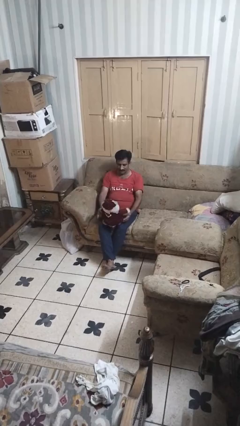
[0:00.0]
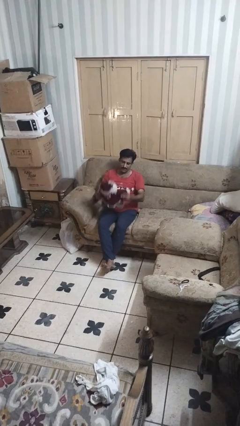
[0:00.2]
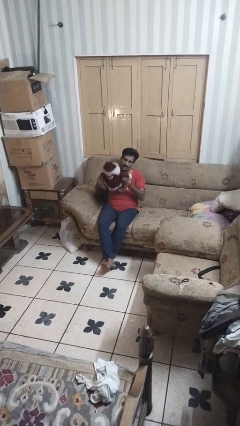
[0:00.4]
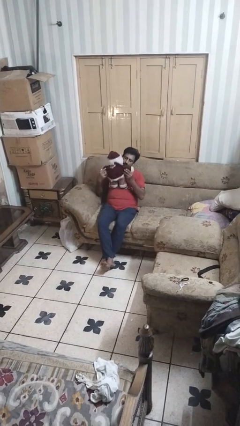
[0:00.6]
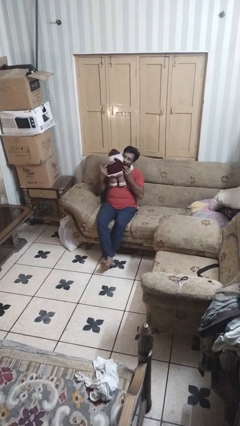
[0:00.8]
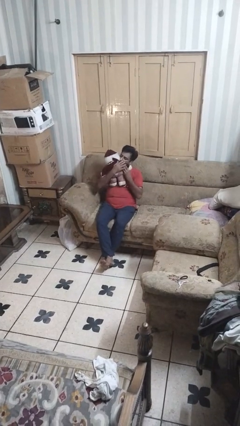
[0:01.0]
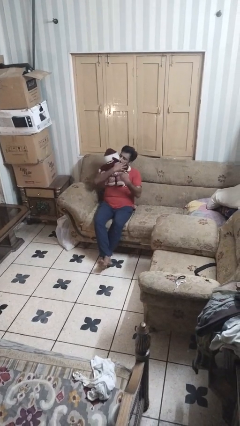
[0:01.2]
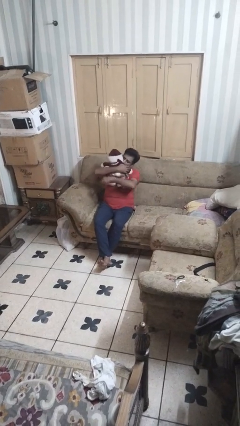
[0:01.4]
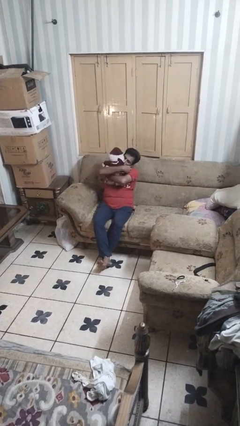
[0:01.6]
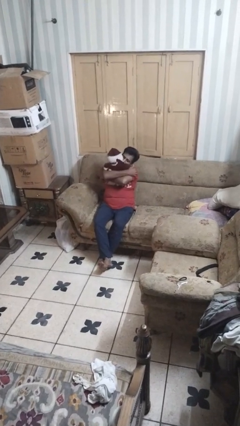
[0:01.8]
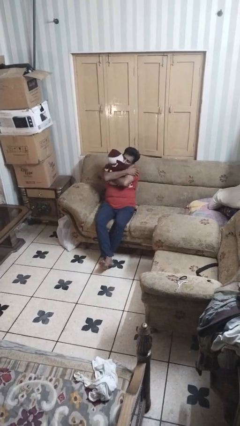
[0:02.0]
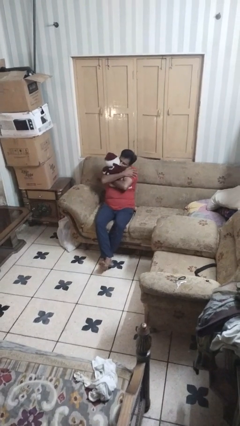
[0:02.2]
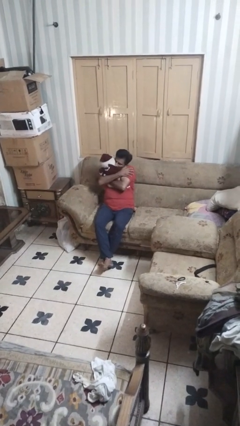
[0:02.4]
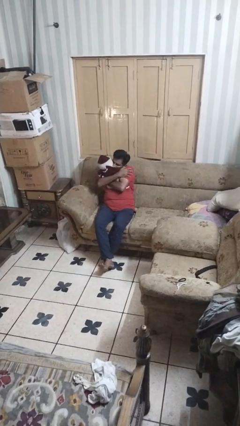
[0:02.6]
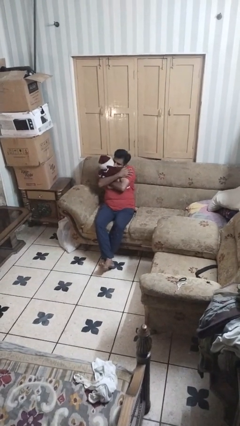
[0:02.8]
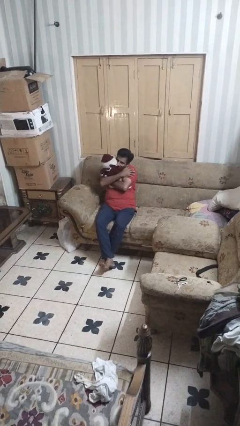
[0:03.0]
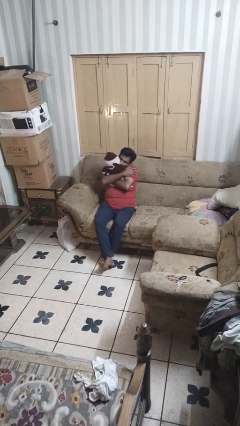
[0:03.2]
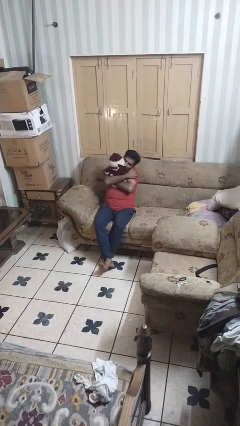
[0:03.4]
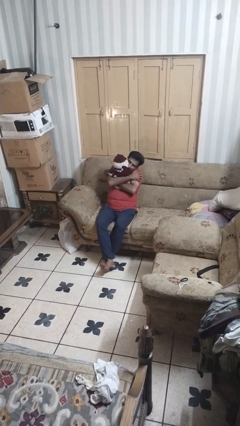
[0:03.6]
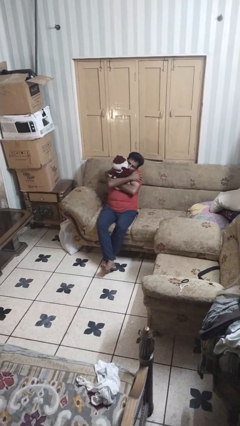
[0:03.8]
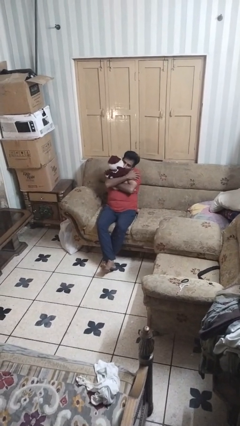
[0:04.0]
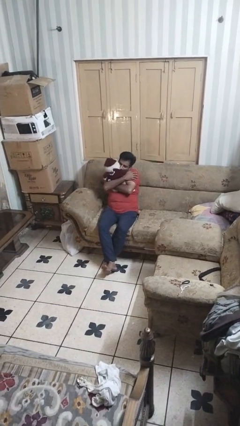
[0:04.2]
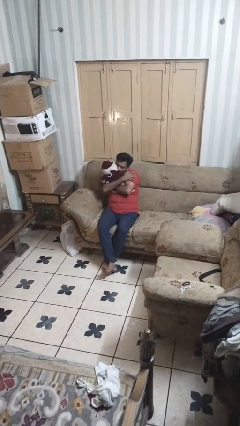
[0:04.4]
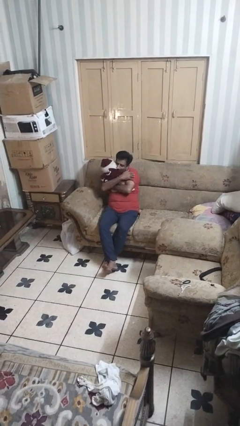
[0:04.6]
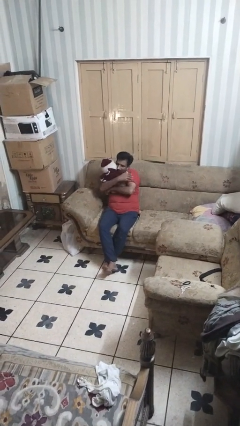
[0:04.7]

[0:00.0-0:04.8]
person hugs stuffed animal

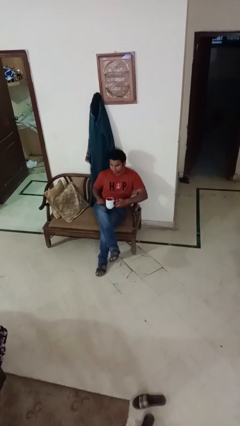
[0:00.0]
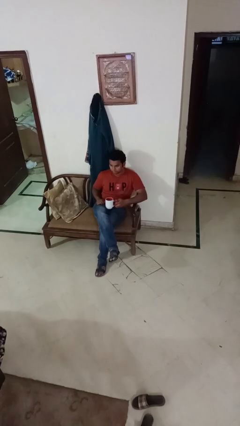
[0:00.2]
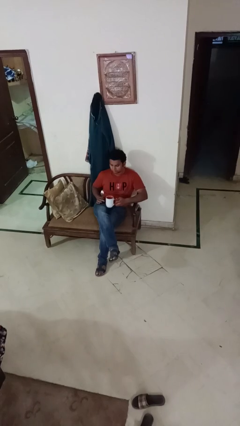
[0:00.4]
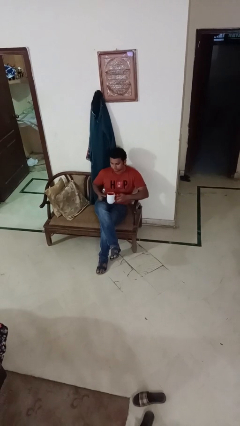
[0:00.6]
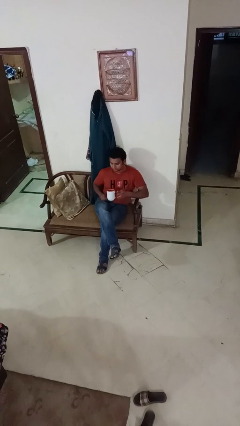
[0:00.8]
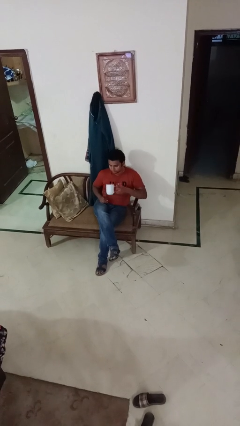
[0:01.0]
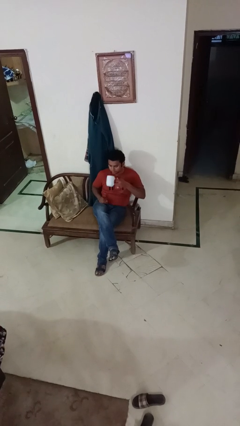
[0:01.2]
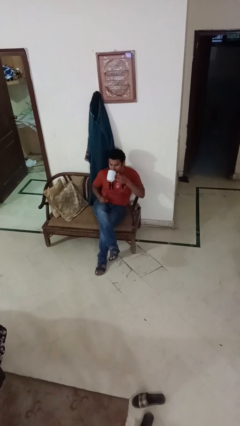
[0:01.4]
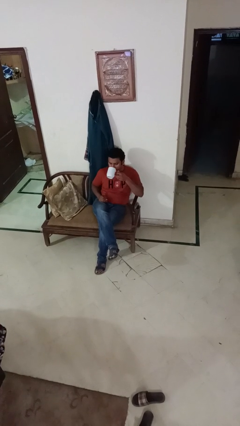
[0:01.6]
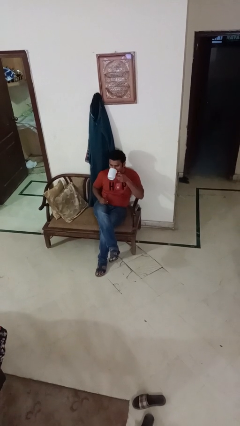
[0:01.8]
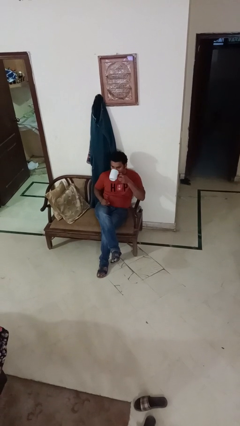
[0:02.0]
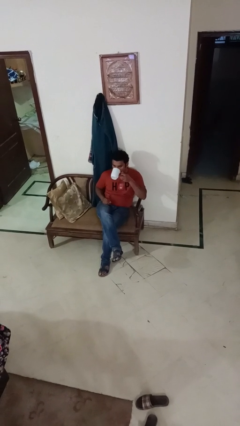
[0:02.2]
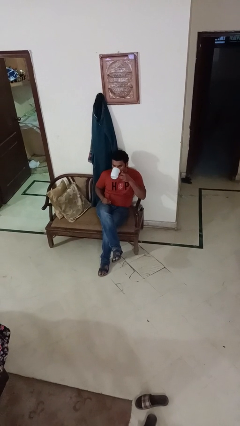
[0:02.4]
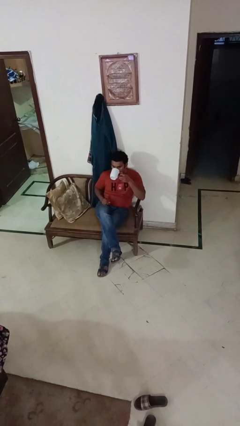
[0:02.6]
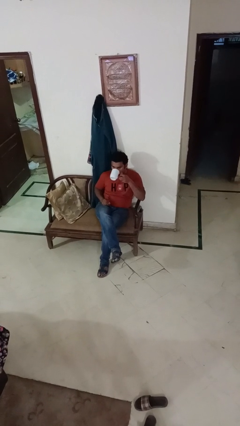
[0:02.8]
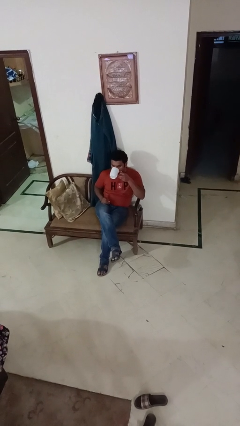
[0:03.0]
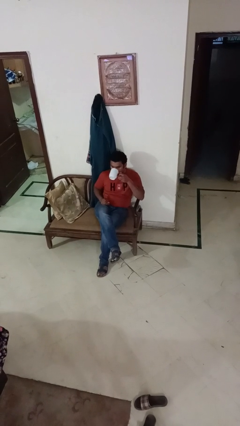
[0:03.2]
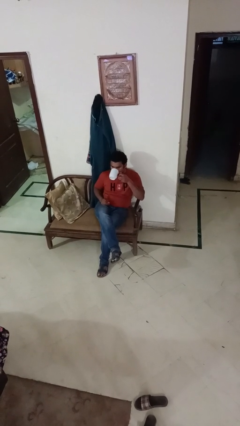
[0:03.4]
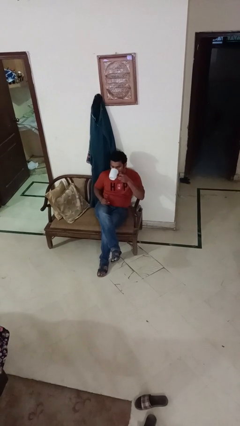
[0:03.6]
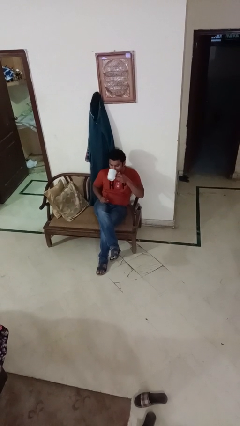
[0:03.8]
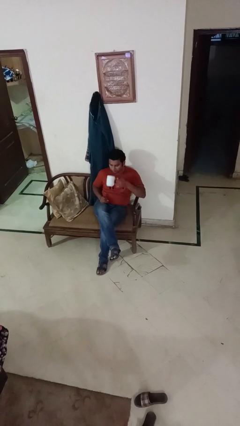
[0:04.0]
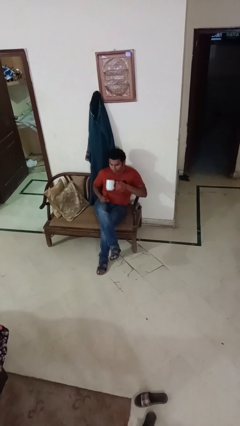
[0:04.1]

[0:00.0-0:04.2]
person drinks from mug

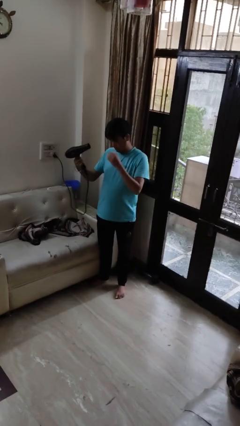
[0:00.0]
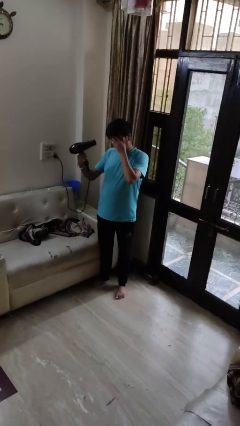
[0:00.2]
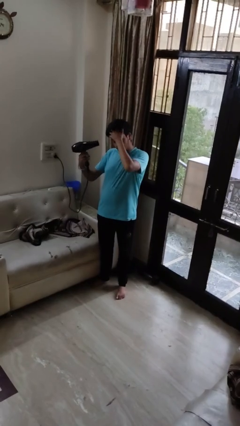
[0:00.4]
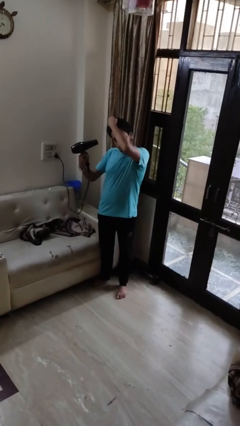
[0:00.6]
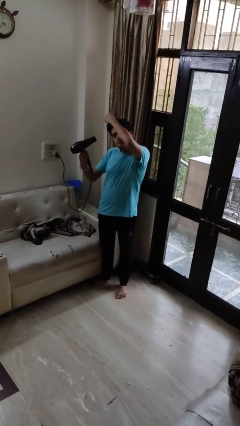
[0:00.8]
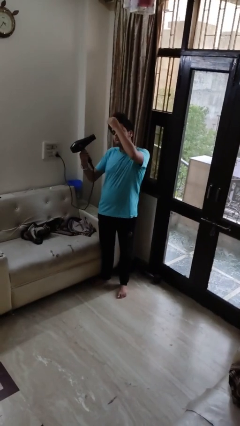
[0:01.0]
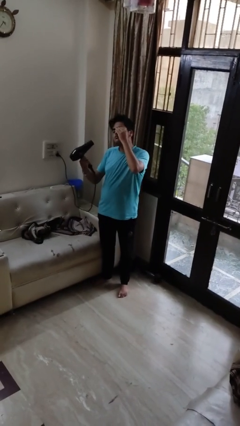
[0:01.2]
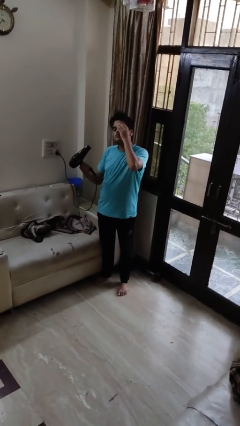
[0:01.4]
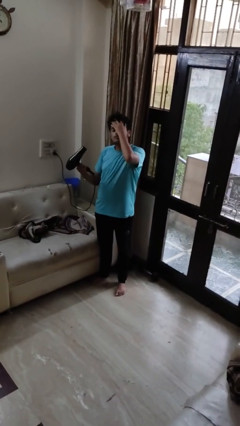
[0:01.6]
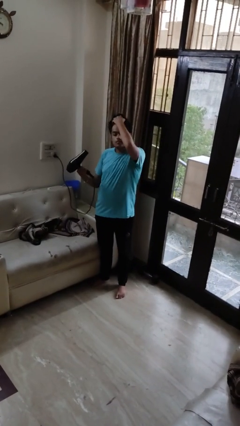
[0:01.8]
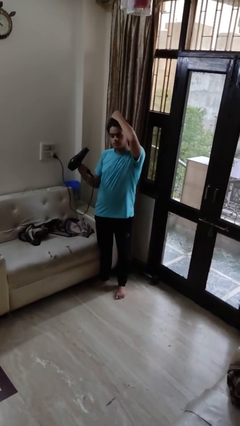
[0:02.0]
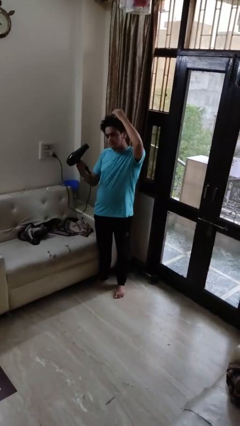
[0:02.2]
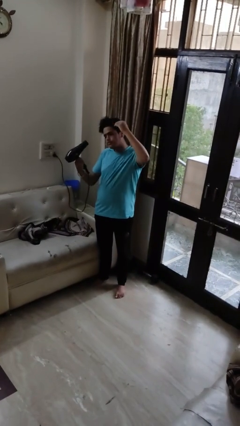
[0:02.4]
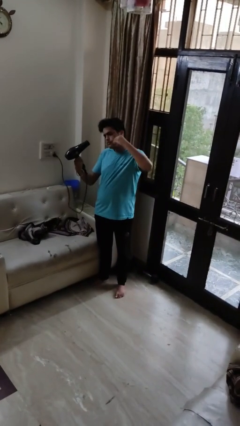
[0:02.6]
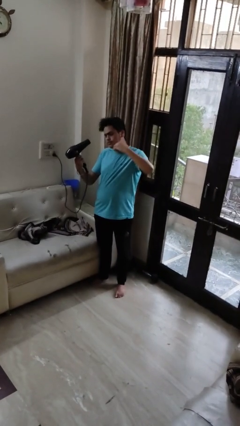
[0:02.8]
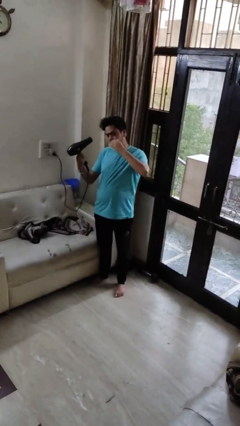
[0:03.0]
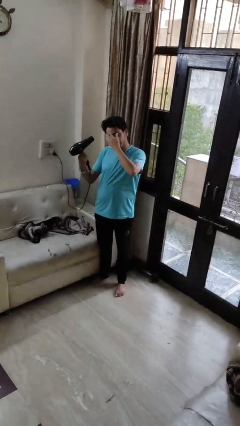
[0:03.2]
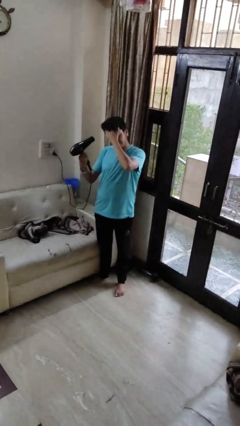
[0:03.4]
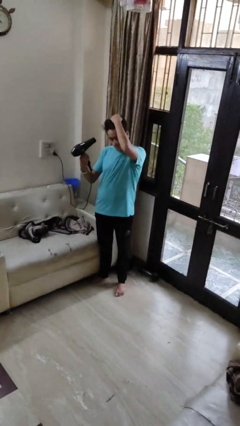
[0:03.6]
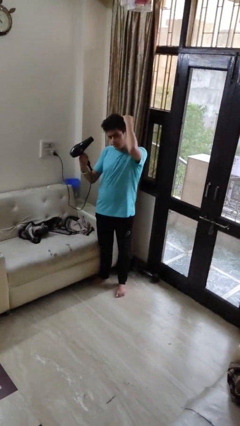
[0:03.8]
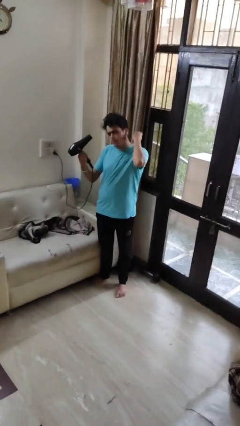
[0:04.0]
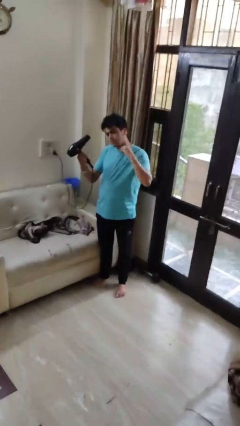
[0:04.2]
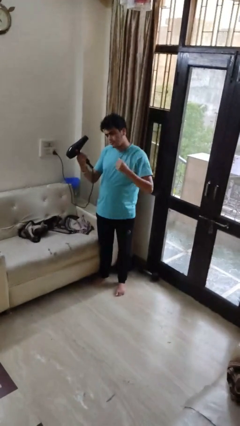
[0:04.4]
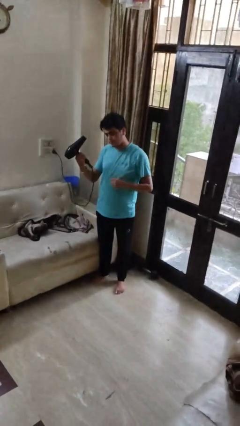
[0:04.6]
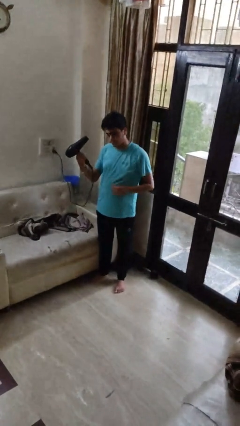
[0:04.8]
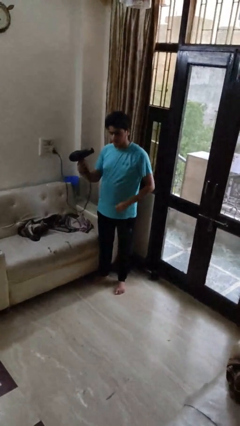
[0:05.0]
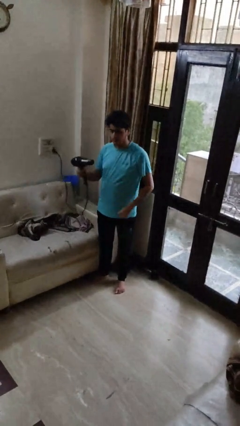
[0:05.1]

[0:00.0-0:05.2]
person dries hair with hairdryer

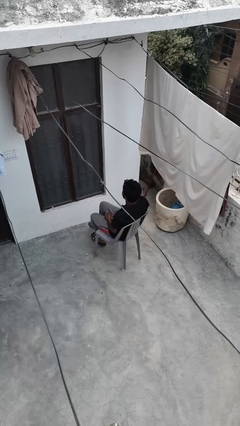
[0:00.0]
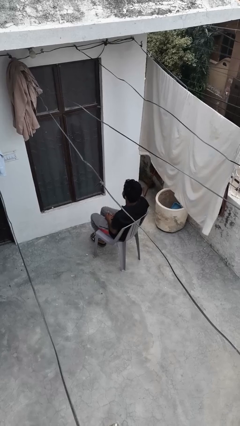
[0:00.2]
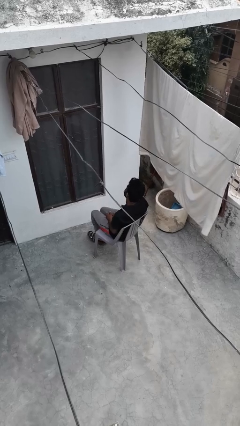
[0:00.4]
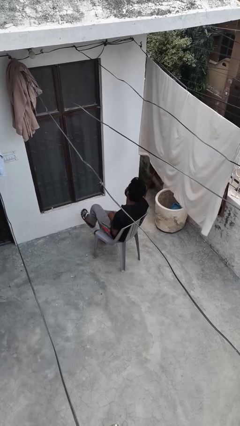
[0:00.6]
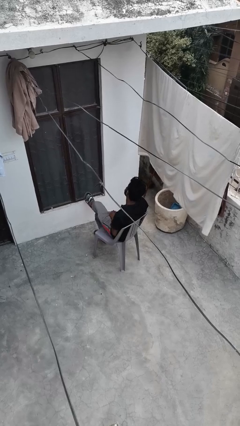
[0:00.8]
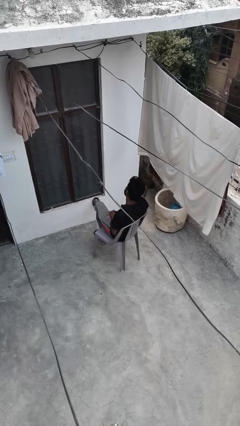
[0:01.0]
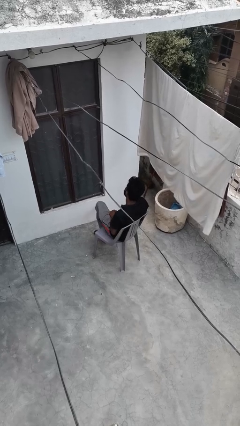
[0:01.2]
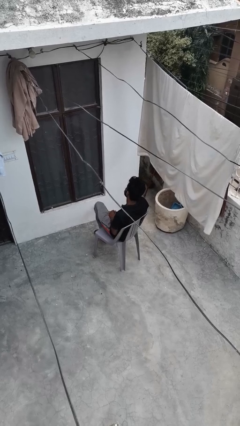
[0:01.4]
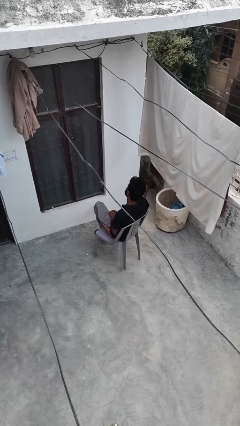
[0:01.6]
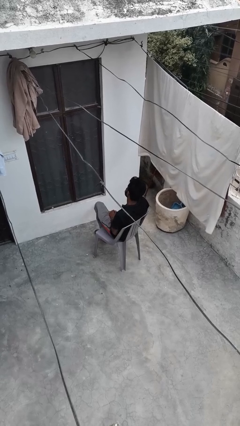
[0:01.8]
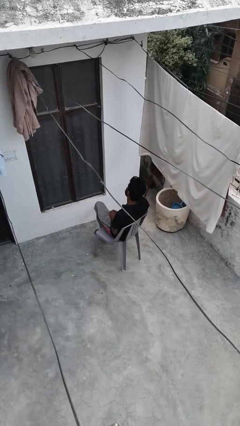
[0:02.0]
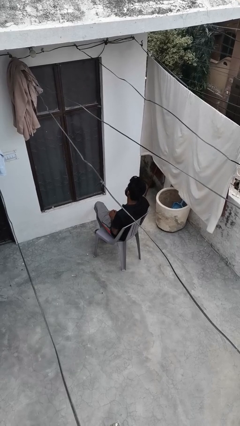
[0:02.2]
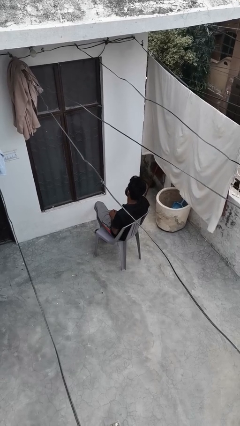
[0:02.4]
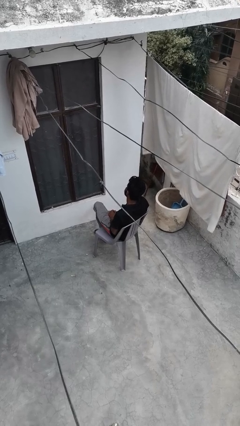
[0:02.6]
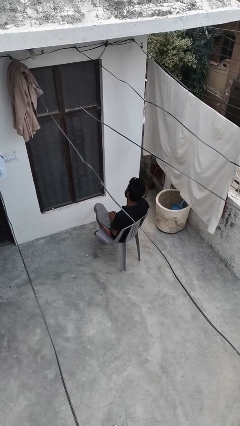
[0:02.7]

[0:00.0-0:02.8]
person crosses legs

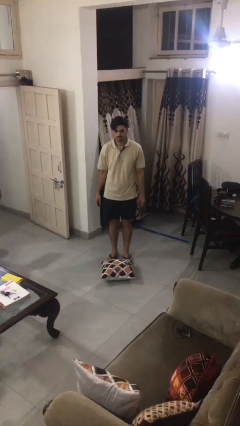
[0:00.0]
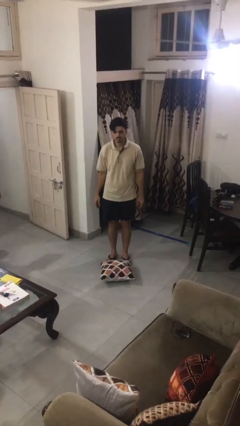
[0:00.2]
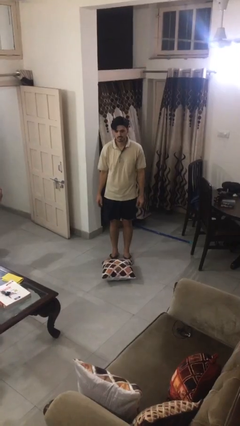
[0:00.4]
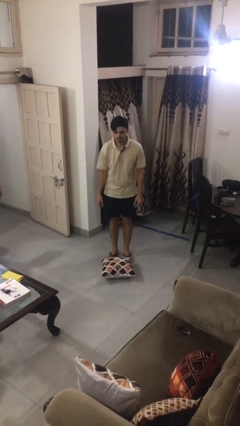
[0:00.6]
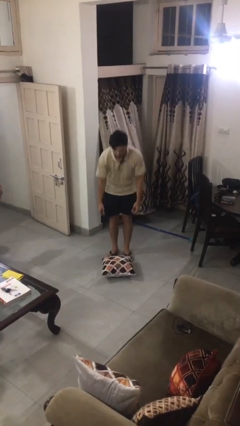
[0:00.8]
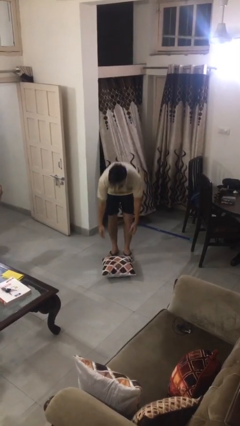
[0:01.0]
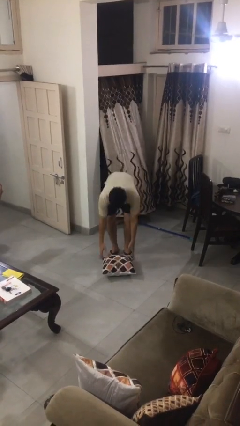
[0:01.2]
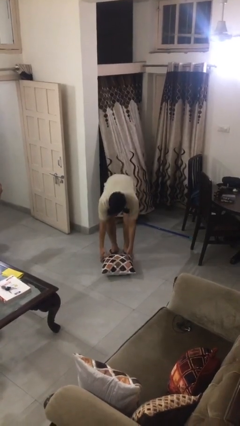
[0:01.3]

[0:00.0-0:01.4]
person picks up object from floor
